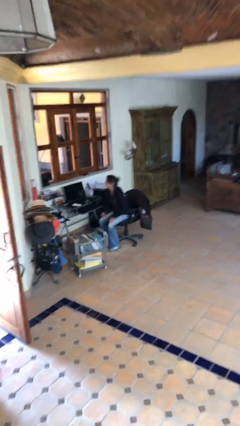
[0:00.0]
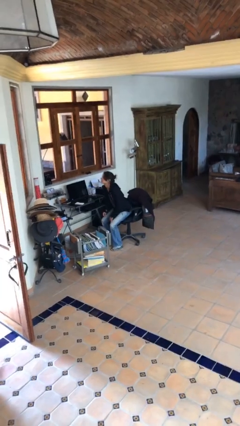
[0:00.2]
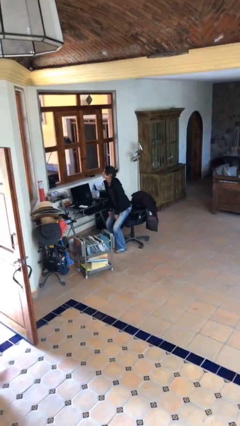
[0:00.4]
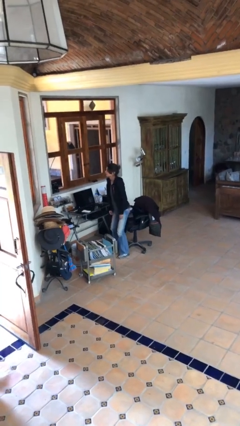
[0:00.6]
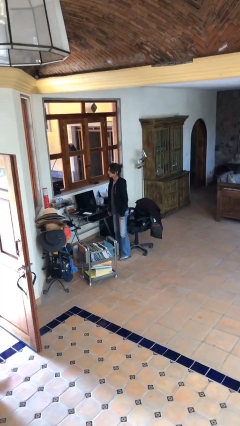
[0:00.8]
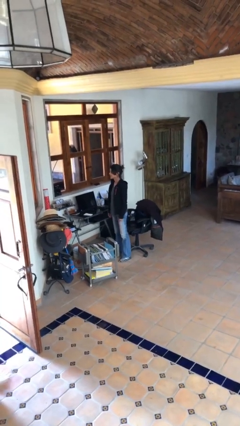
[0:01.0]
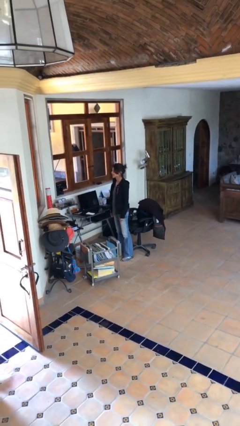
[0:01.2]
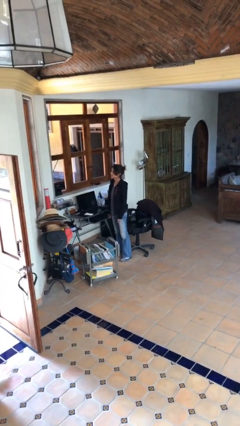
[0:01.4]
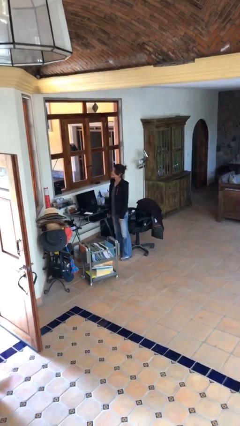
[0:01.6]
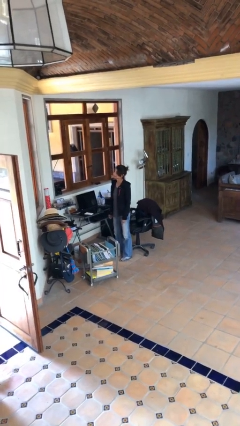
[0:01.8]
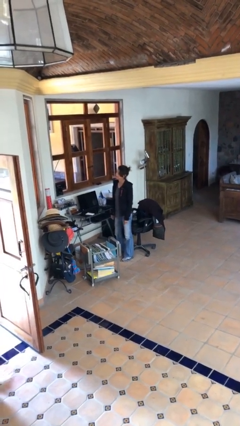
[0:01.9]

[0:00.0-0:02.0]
person stands up

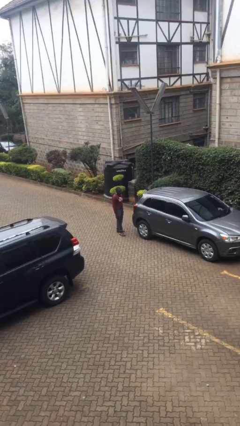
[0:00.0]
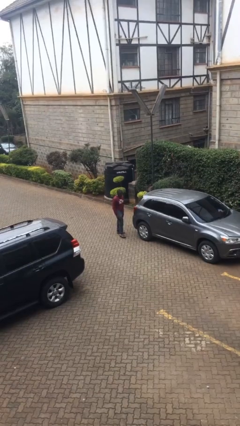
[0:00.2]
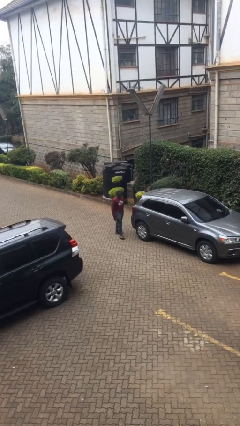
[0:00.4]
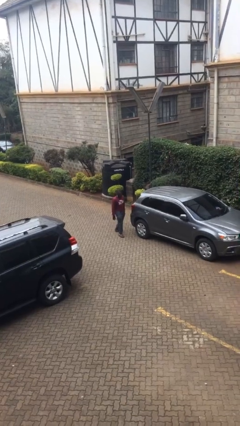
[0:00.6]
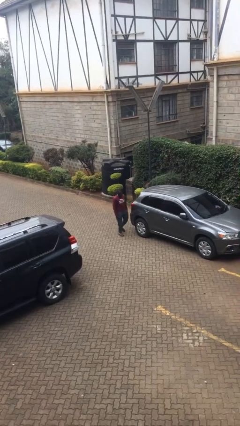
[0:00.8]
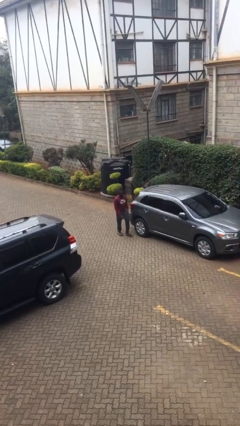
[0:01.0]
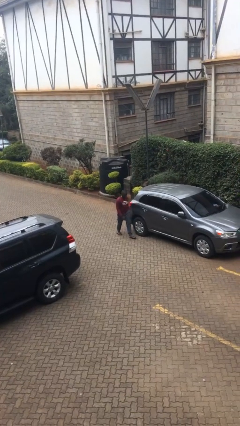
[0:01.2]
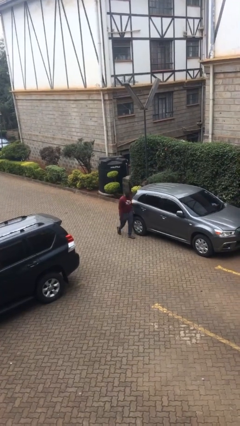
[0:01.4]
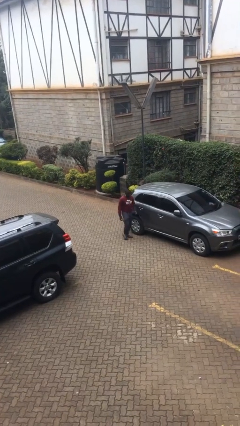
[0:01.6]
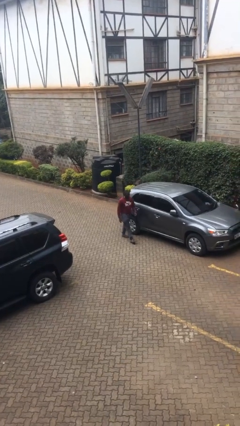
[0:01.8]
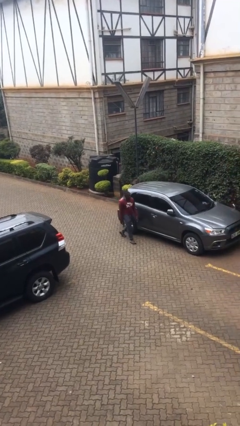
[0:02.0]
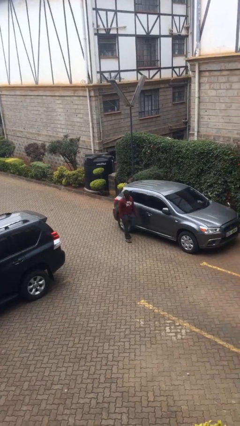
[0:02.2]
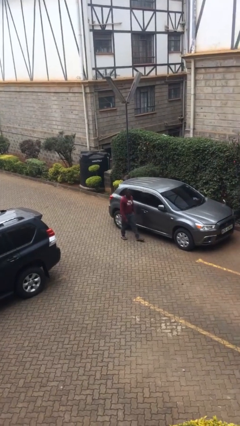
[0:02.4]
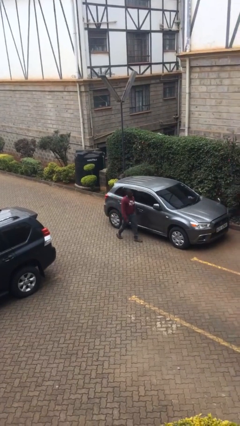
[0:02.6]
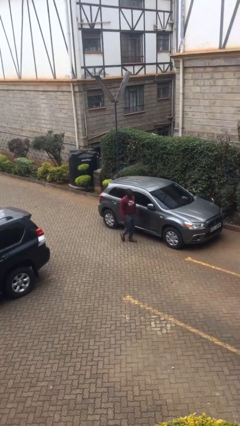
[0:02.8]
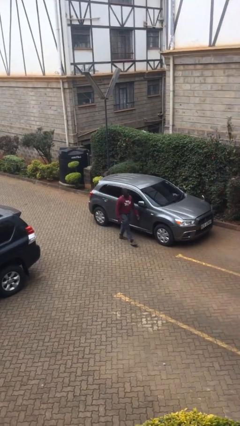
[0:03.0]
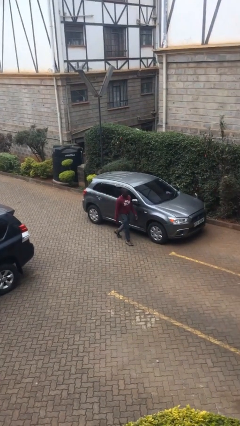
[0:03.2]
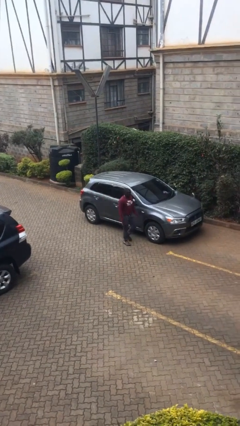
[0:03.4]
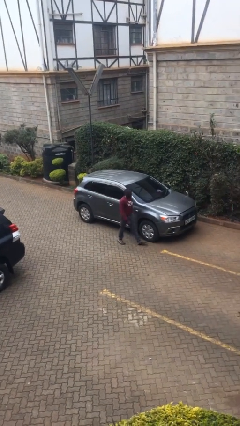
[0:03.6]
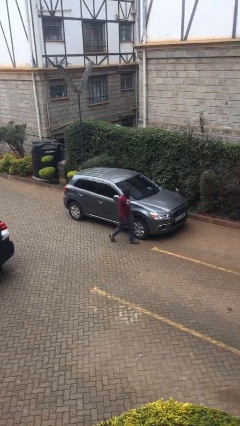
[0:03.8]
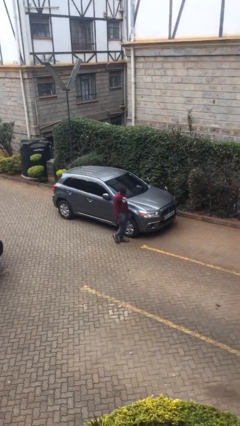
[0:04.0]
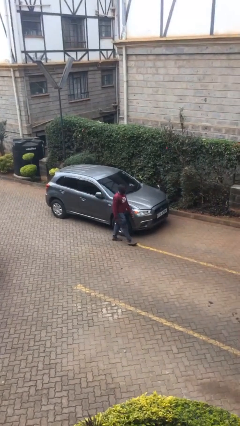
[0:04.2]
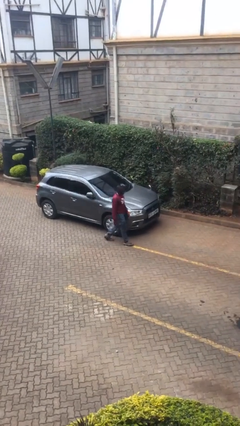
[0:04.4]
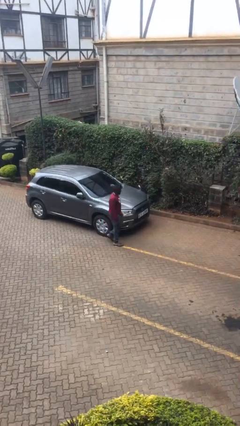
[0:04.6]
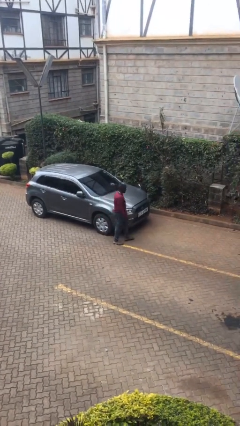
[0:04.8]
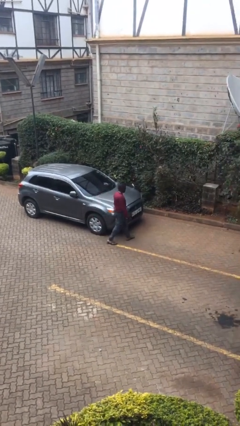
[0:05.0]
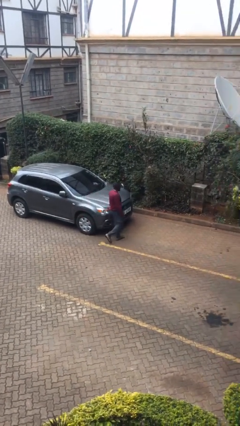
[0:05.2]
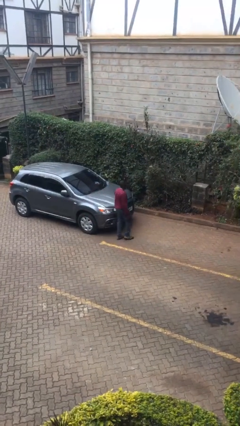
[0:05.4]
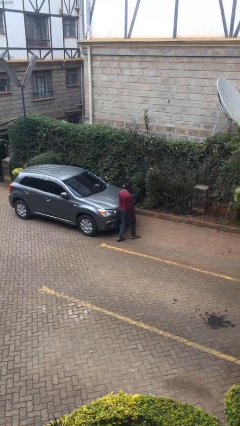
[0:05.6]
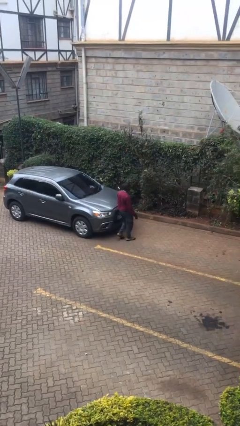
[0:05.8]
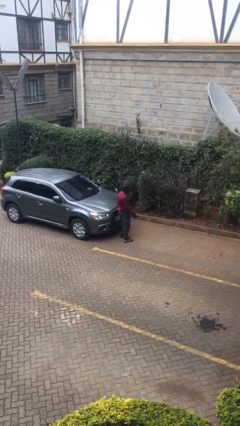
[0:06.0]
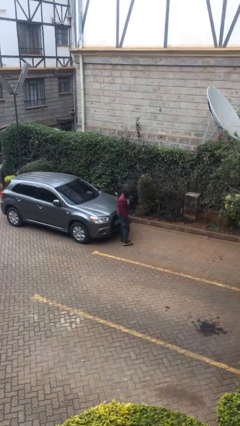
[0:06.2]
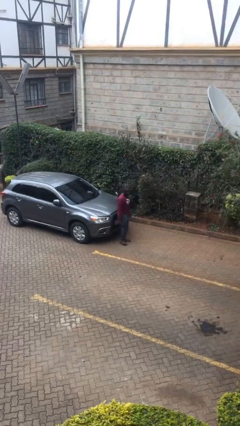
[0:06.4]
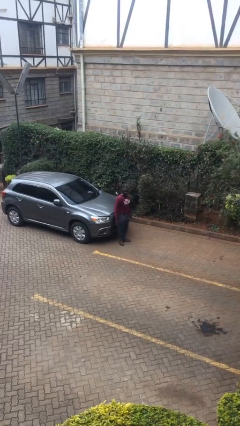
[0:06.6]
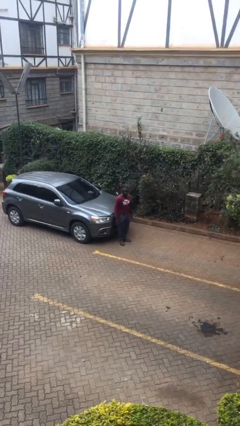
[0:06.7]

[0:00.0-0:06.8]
person walks around car

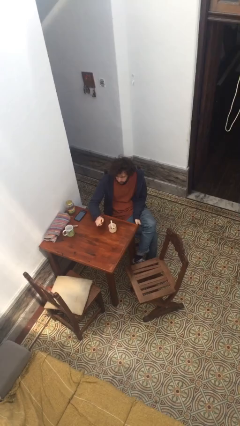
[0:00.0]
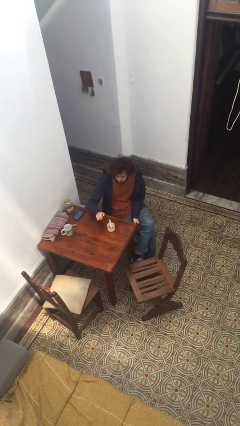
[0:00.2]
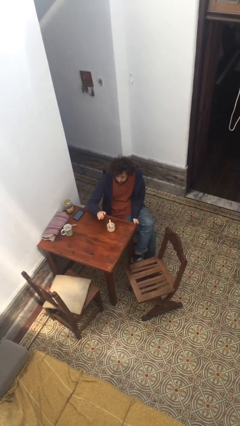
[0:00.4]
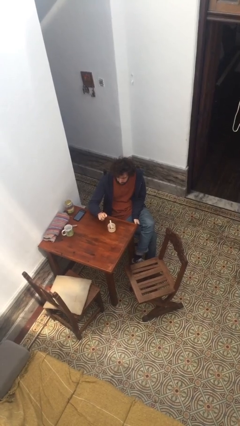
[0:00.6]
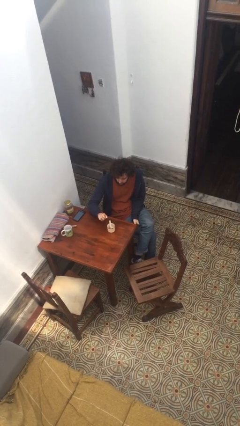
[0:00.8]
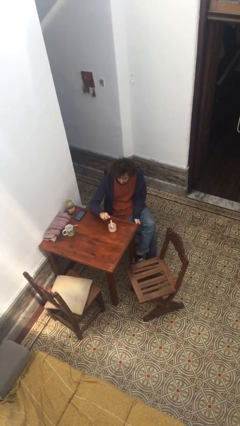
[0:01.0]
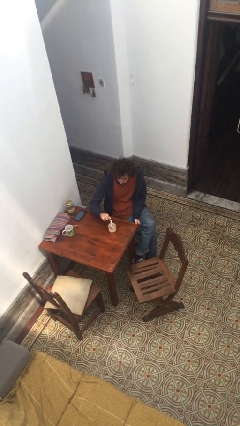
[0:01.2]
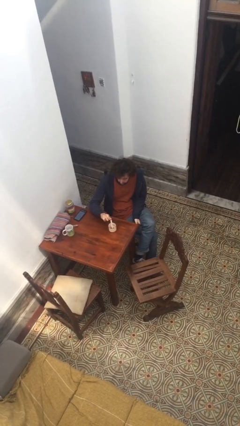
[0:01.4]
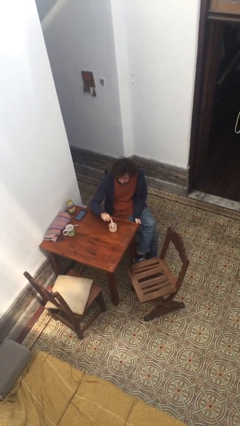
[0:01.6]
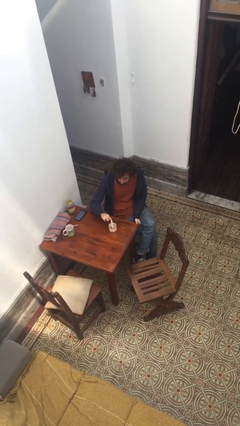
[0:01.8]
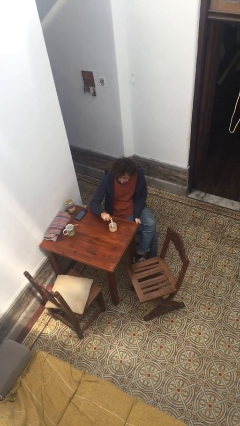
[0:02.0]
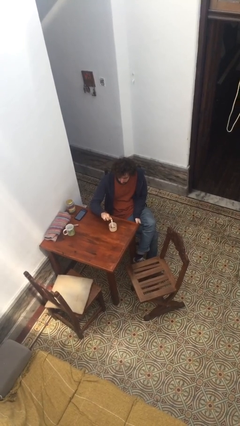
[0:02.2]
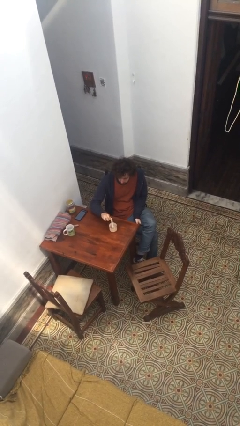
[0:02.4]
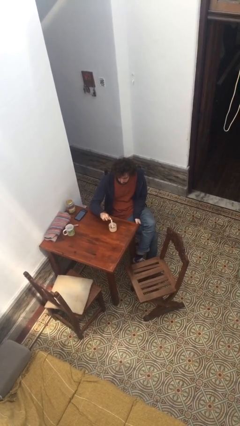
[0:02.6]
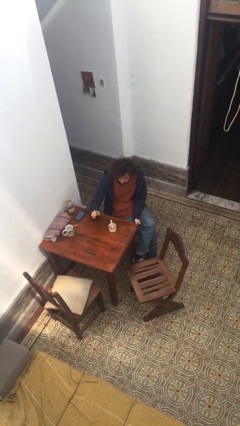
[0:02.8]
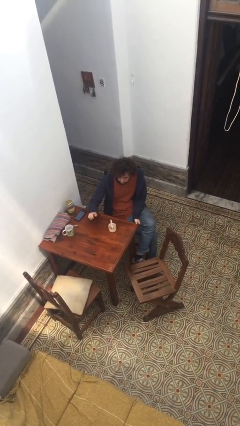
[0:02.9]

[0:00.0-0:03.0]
person lights candle

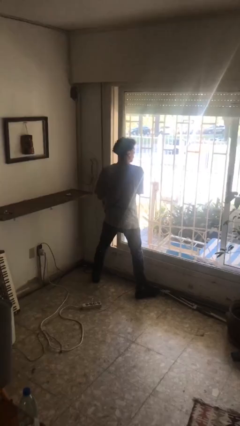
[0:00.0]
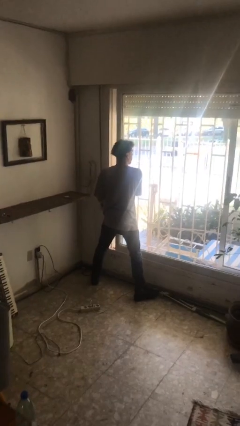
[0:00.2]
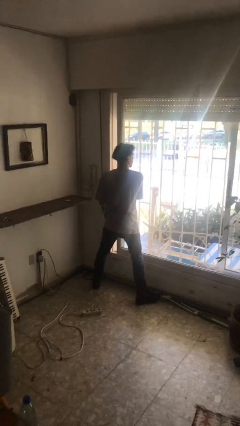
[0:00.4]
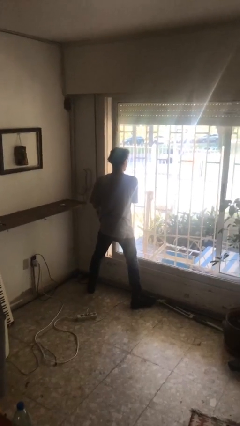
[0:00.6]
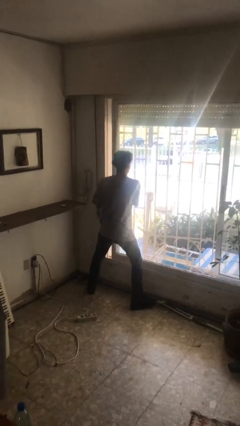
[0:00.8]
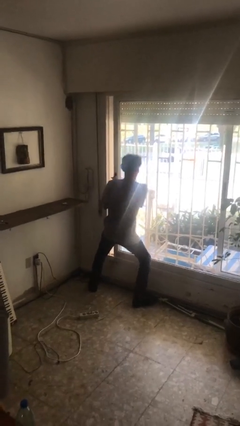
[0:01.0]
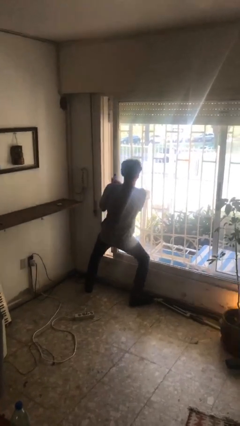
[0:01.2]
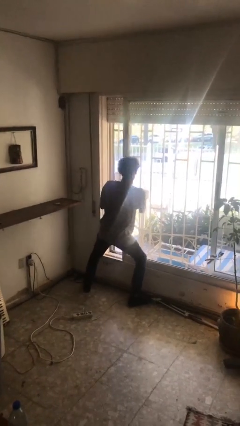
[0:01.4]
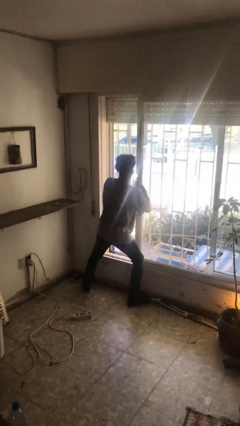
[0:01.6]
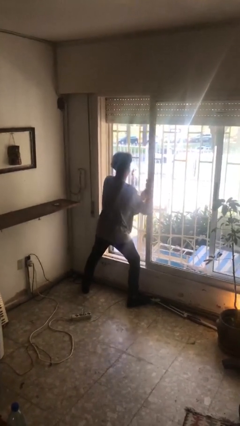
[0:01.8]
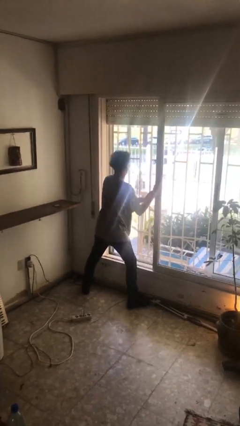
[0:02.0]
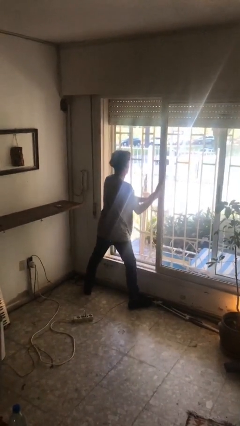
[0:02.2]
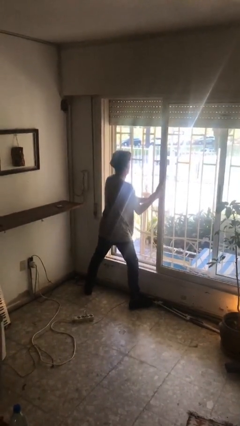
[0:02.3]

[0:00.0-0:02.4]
person opens sliding door

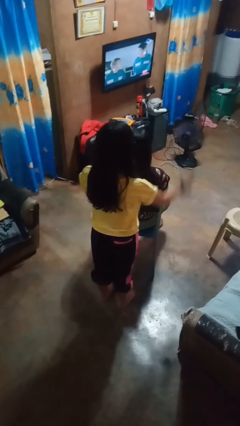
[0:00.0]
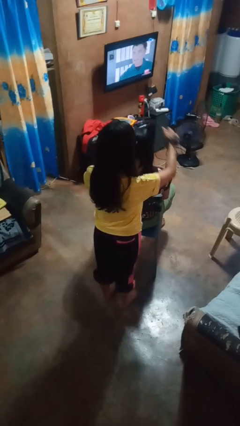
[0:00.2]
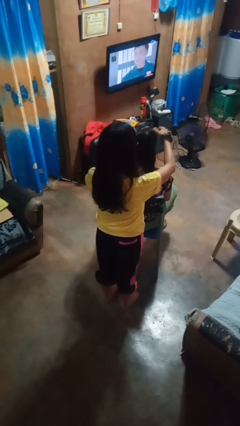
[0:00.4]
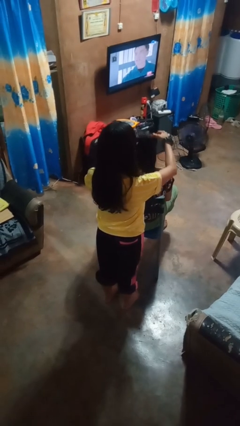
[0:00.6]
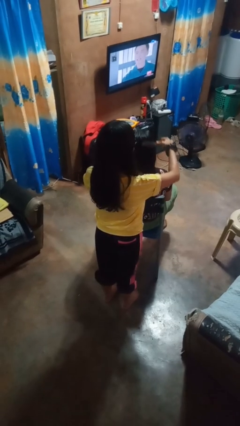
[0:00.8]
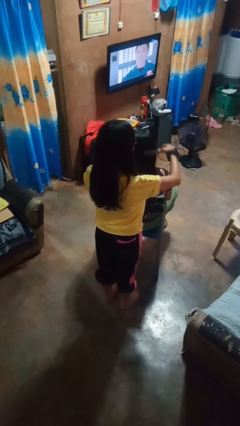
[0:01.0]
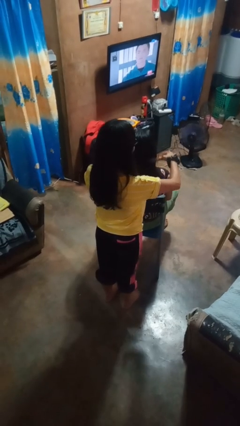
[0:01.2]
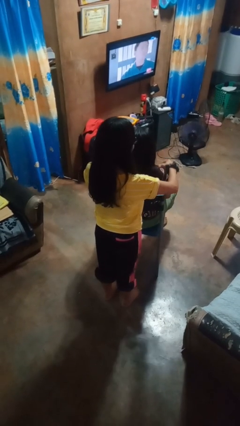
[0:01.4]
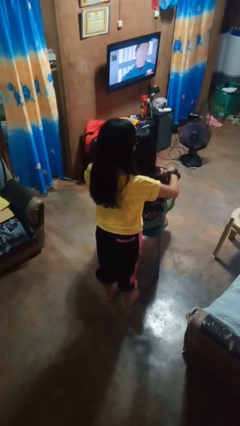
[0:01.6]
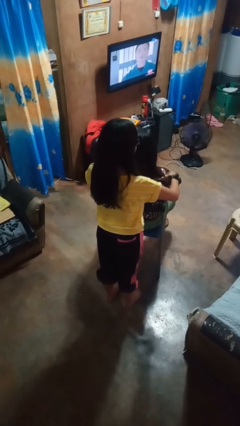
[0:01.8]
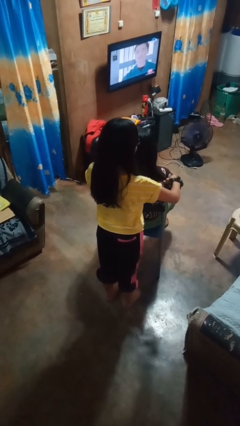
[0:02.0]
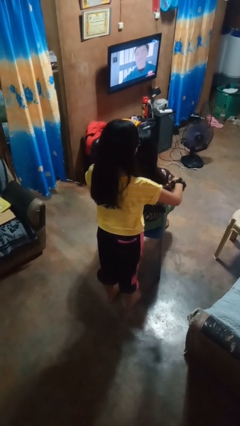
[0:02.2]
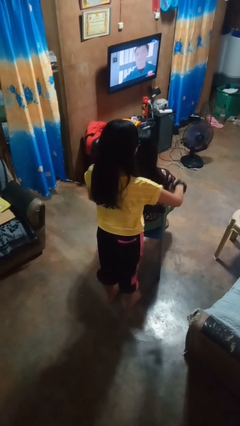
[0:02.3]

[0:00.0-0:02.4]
person brushes hair of person

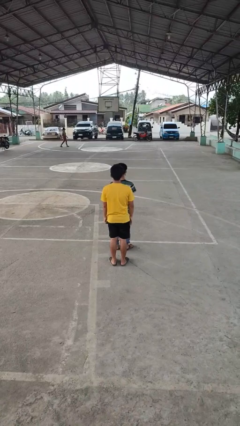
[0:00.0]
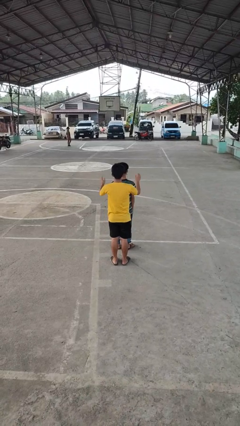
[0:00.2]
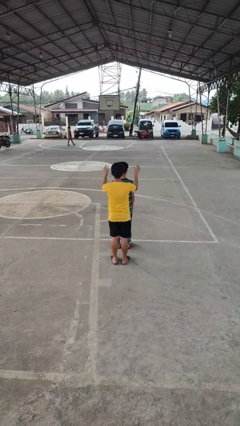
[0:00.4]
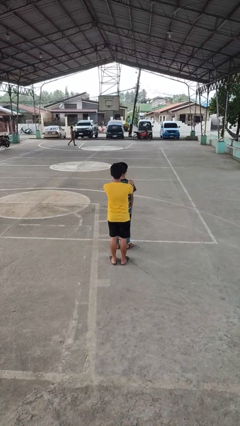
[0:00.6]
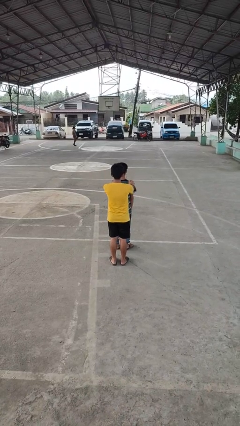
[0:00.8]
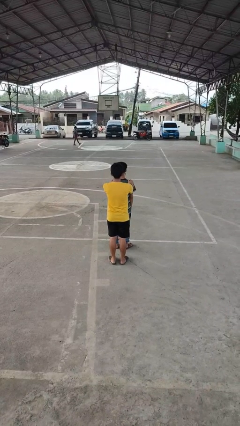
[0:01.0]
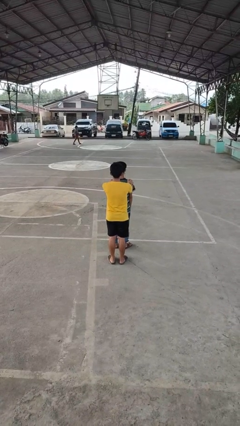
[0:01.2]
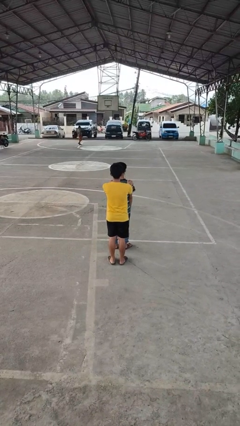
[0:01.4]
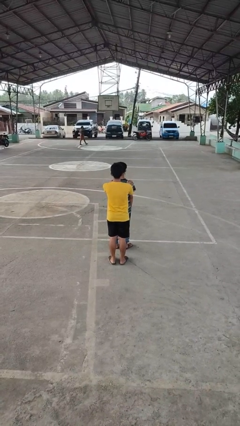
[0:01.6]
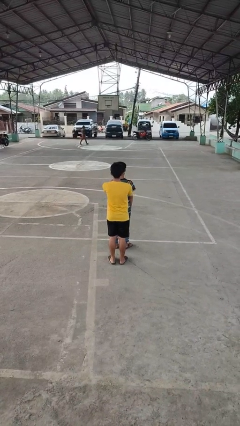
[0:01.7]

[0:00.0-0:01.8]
person grabs person by shoulder
